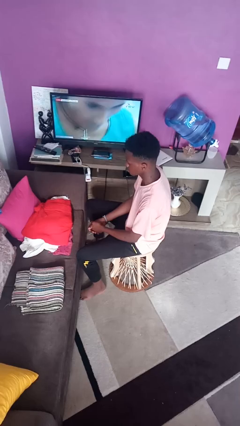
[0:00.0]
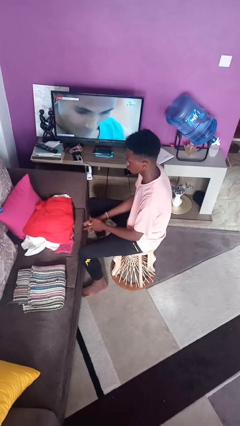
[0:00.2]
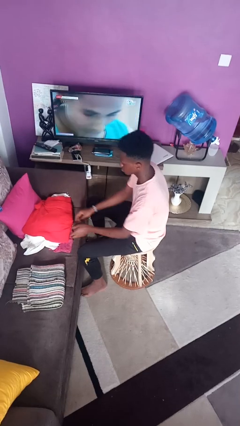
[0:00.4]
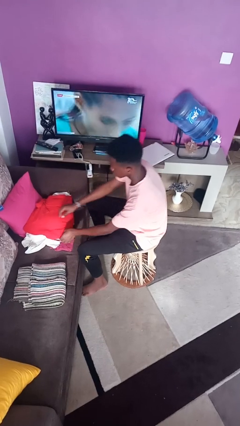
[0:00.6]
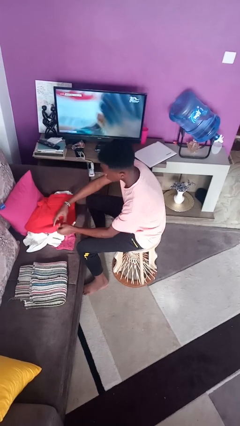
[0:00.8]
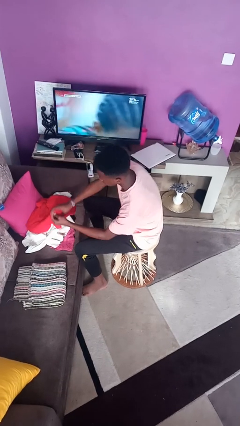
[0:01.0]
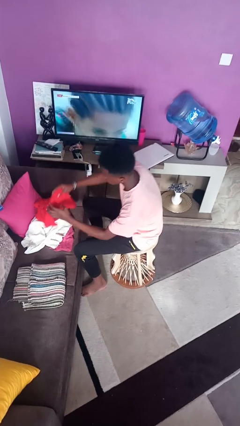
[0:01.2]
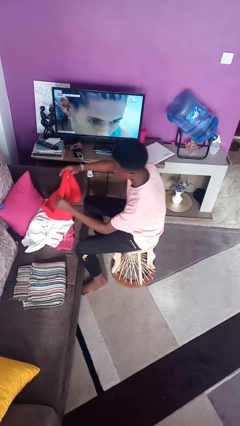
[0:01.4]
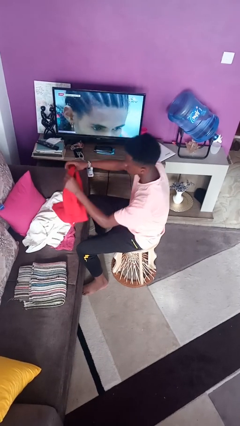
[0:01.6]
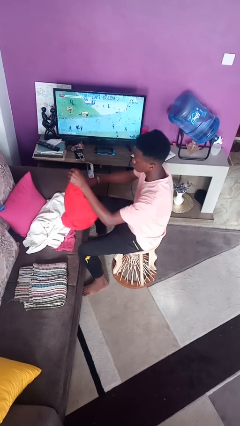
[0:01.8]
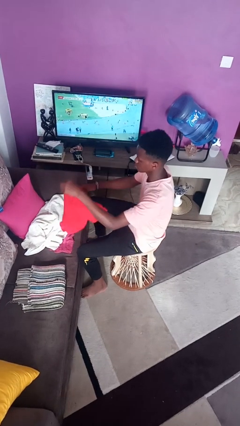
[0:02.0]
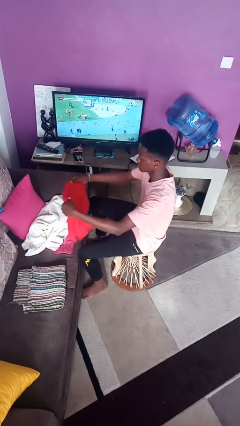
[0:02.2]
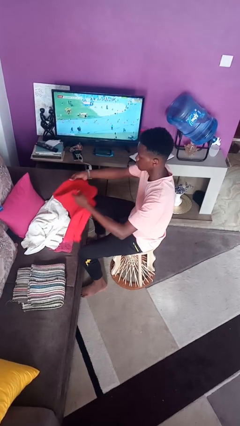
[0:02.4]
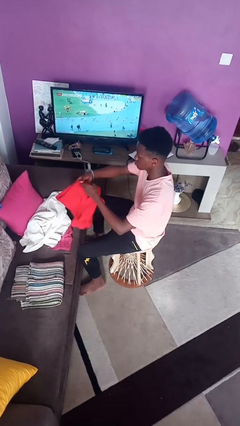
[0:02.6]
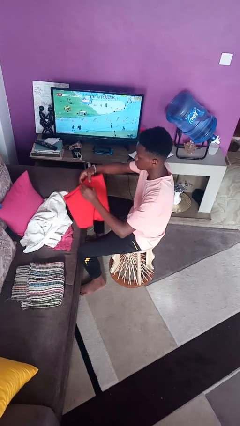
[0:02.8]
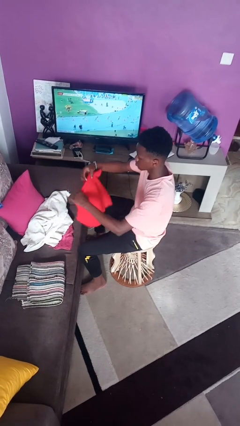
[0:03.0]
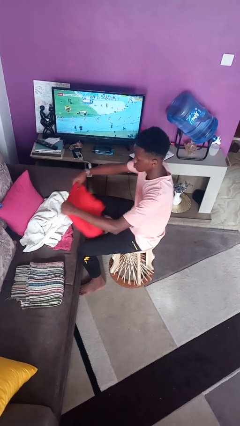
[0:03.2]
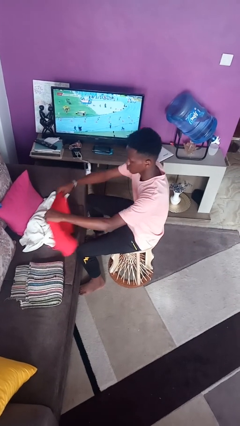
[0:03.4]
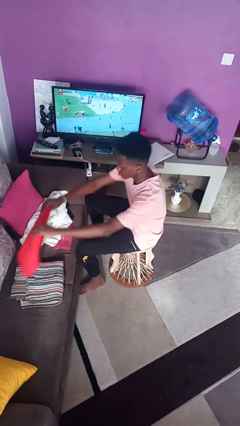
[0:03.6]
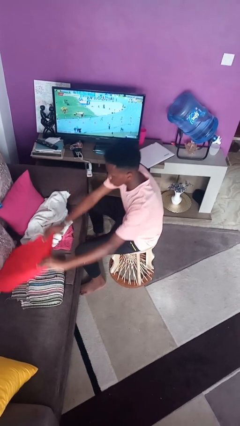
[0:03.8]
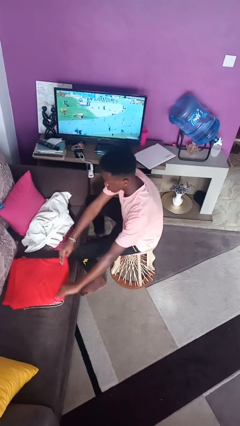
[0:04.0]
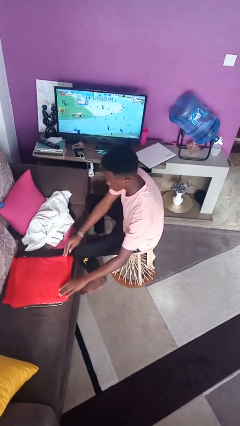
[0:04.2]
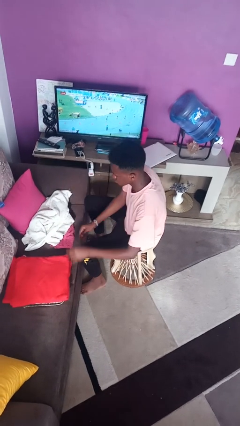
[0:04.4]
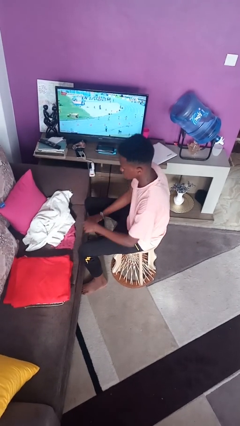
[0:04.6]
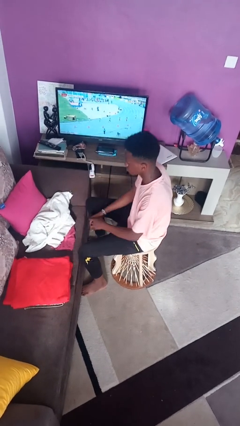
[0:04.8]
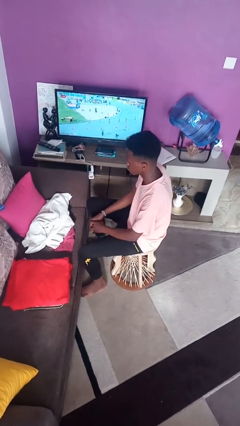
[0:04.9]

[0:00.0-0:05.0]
person folds towel

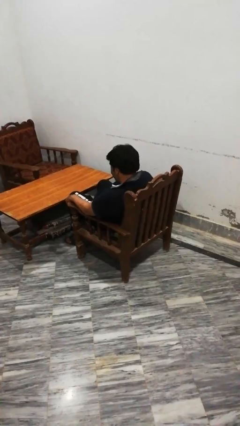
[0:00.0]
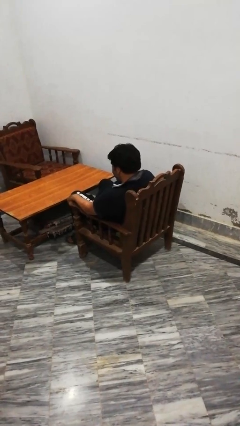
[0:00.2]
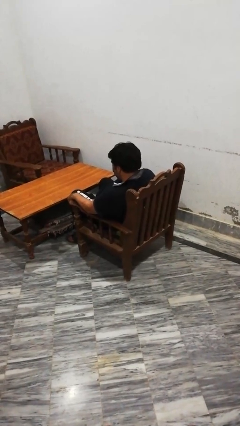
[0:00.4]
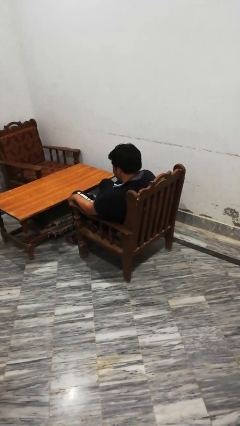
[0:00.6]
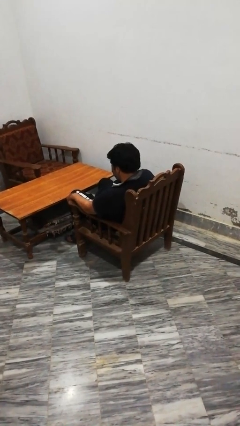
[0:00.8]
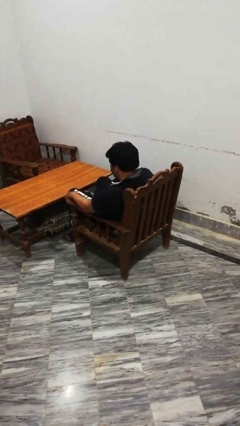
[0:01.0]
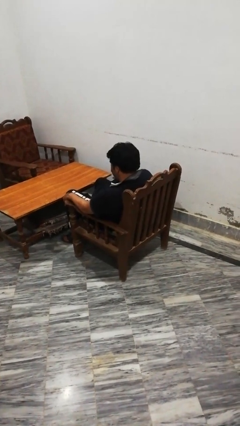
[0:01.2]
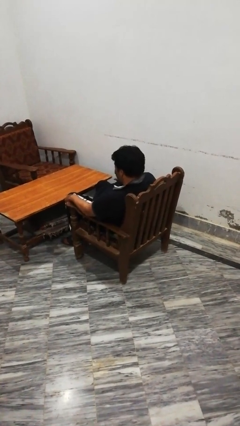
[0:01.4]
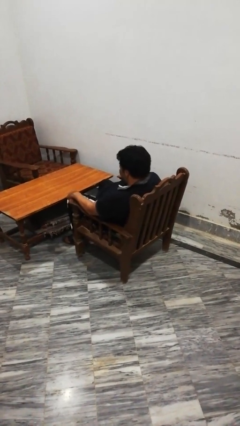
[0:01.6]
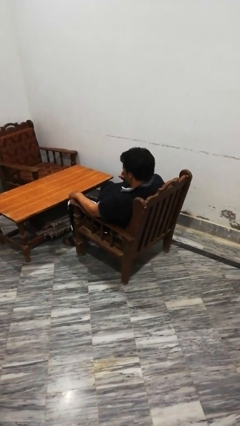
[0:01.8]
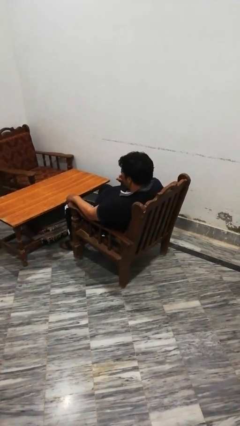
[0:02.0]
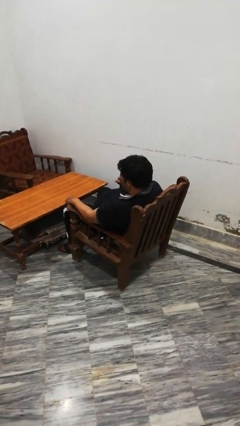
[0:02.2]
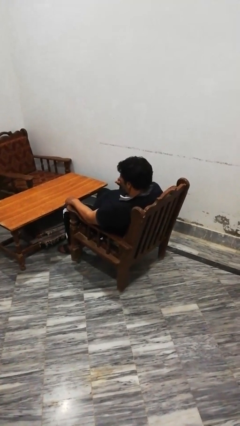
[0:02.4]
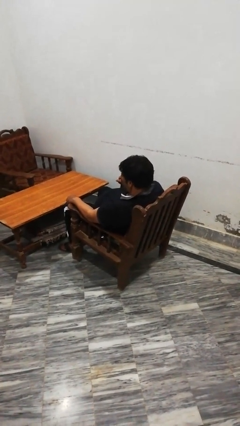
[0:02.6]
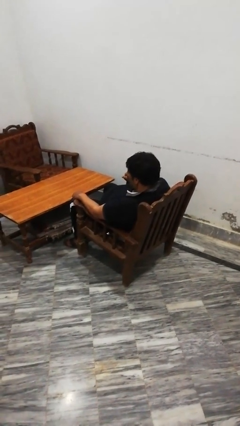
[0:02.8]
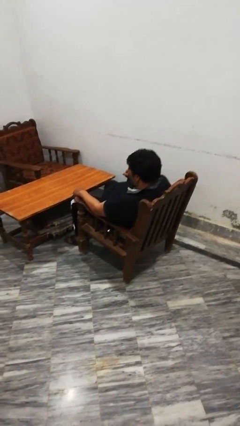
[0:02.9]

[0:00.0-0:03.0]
person pulls out chair

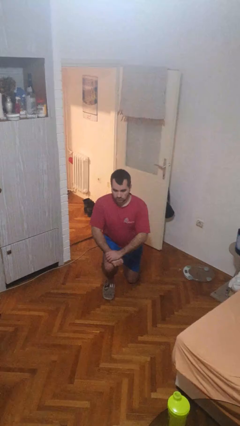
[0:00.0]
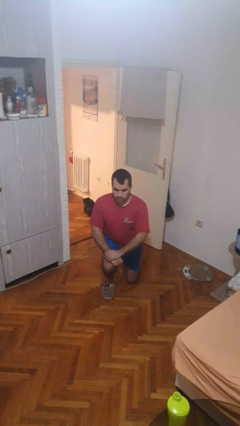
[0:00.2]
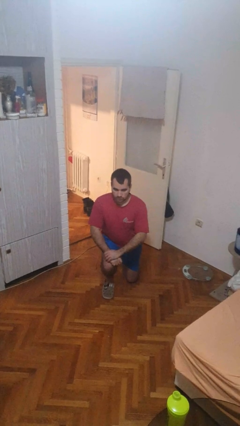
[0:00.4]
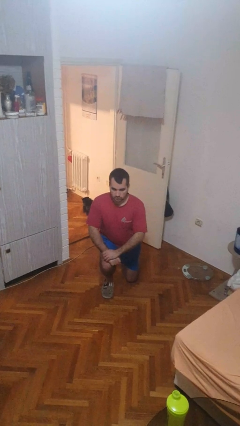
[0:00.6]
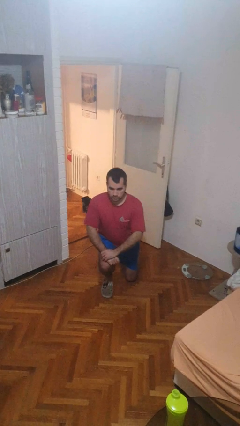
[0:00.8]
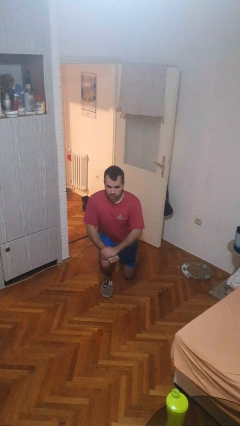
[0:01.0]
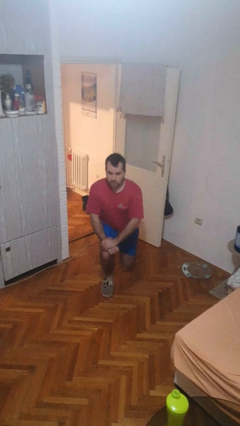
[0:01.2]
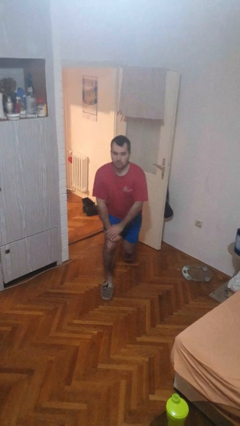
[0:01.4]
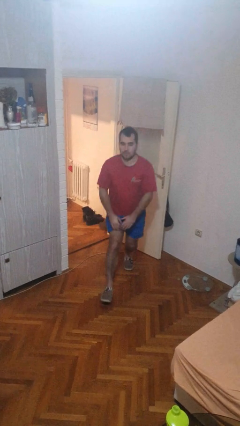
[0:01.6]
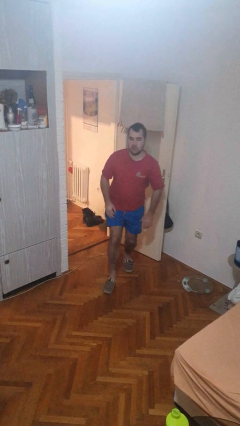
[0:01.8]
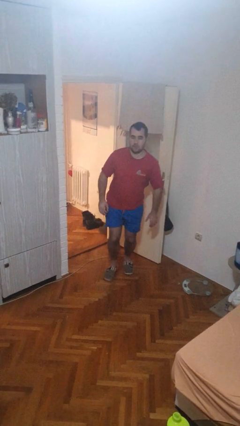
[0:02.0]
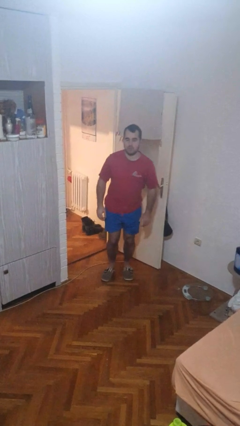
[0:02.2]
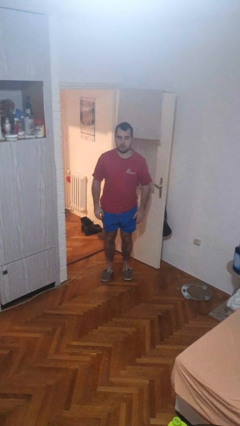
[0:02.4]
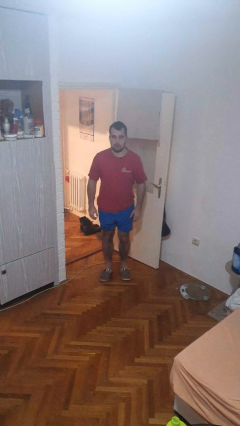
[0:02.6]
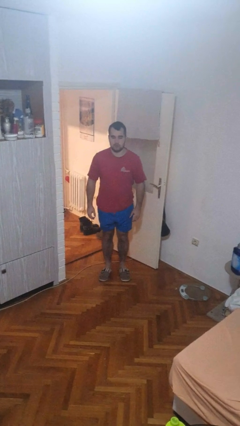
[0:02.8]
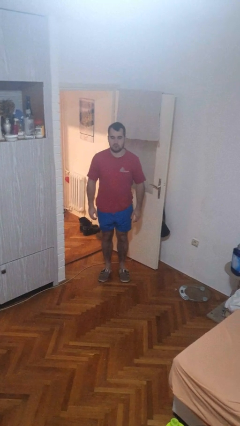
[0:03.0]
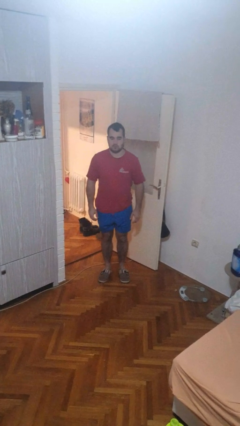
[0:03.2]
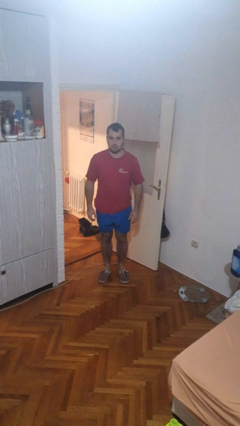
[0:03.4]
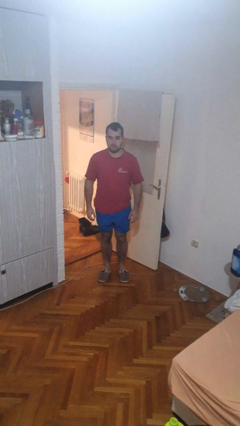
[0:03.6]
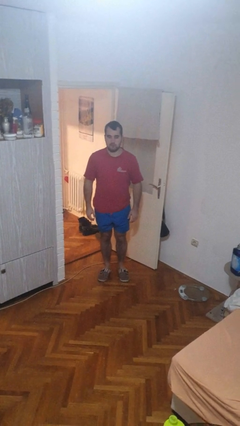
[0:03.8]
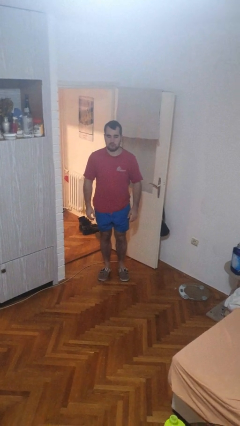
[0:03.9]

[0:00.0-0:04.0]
person stands up from floor

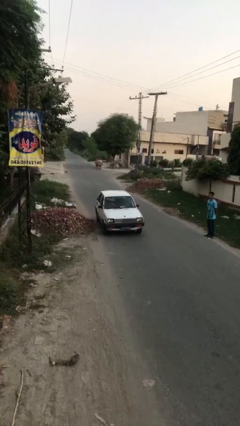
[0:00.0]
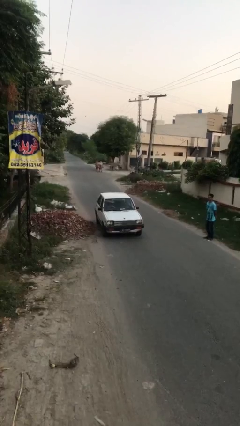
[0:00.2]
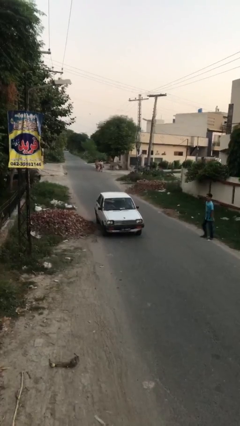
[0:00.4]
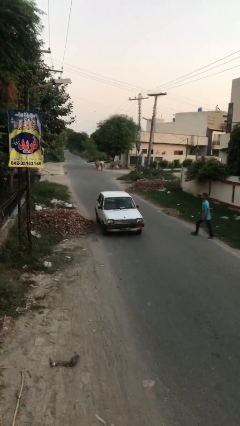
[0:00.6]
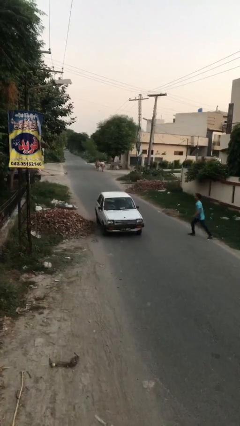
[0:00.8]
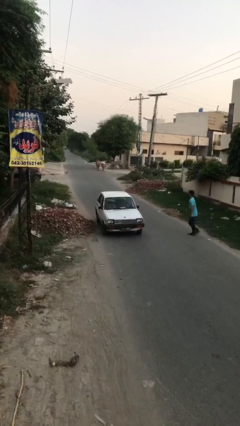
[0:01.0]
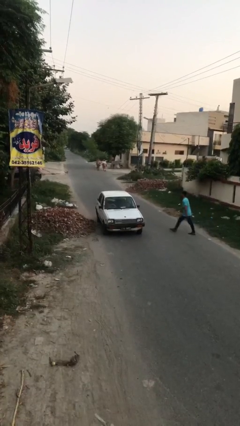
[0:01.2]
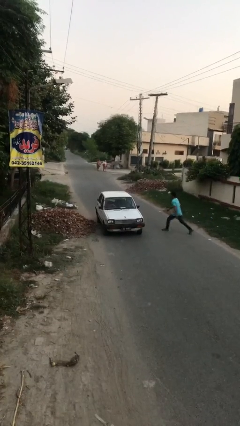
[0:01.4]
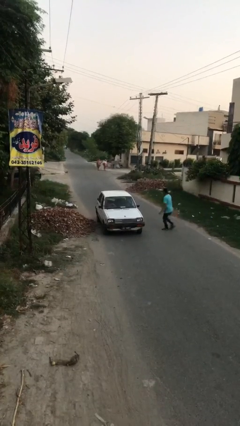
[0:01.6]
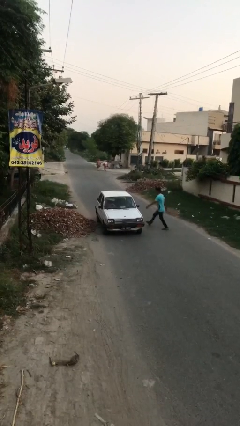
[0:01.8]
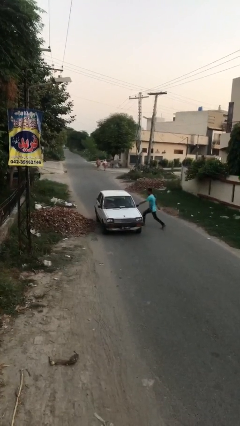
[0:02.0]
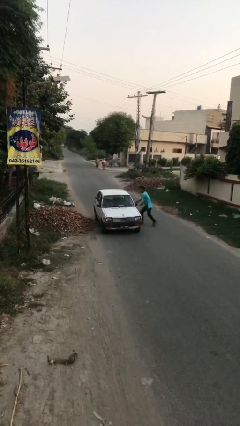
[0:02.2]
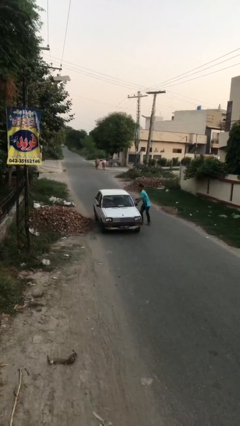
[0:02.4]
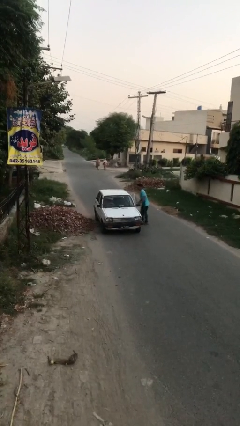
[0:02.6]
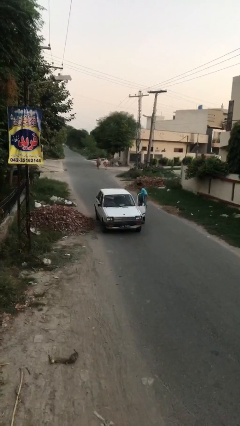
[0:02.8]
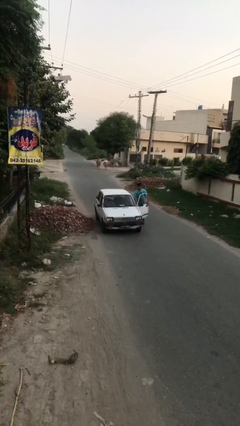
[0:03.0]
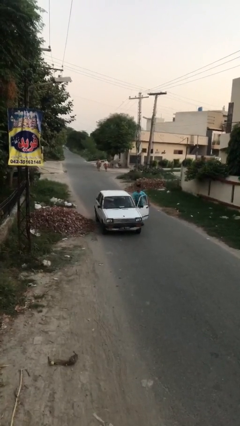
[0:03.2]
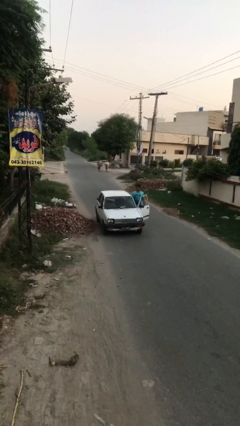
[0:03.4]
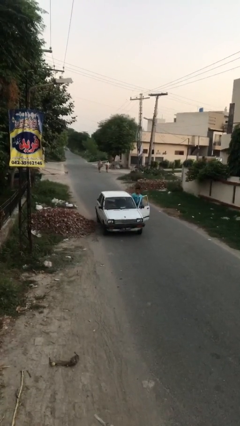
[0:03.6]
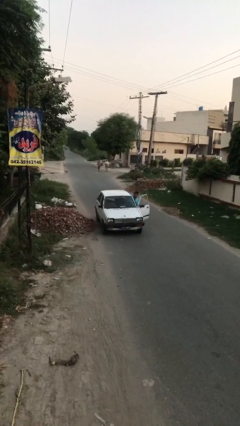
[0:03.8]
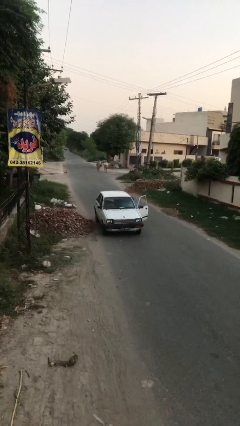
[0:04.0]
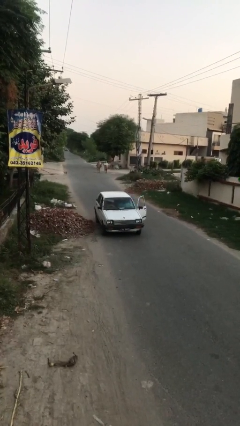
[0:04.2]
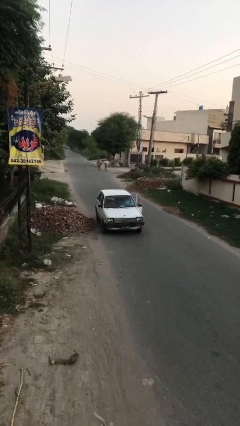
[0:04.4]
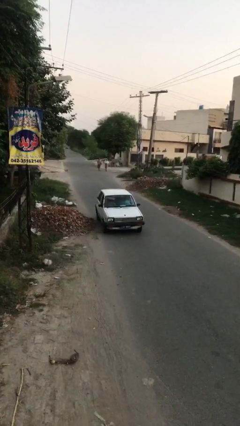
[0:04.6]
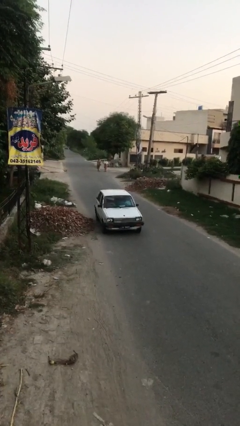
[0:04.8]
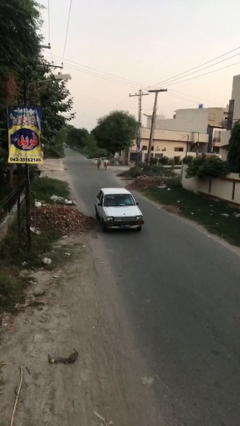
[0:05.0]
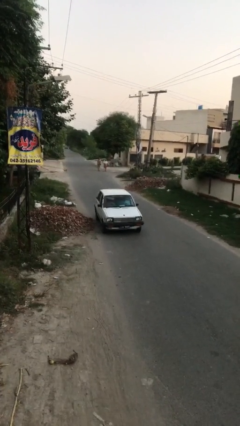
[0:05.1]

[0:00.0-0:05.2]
car picks up person

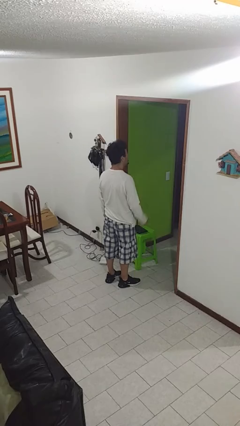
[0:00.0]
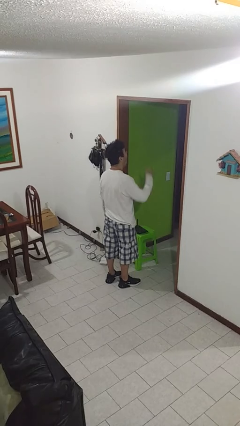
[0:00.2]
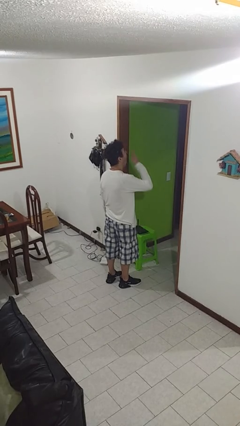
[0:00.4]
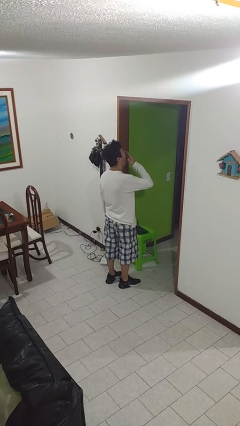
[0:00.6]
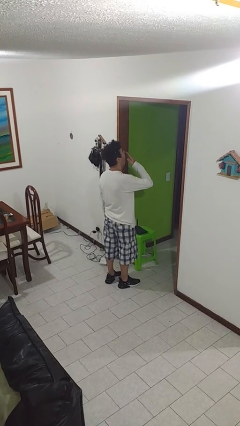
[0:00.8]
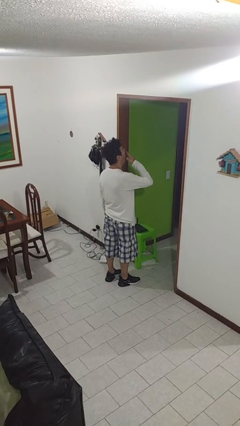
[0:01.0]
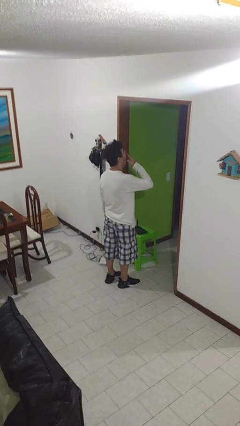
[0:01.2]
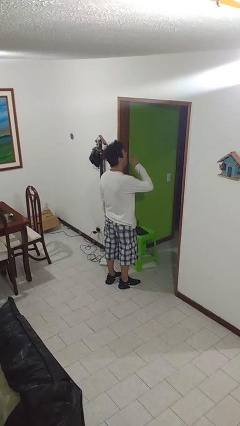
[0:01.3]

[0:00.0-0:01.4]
person yawns
